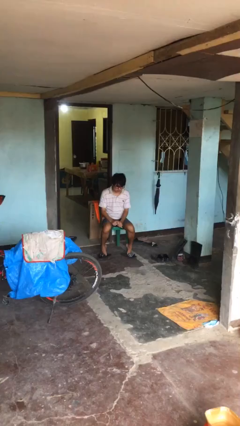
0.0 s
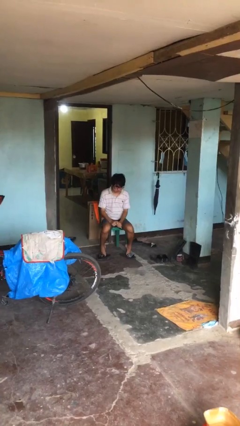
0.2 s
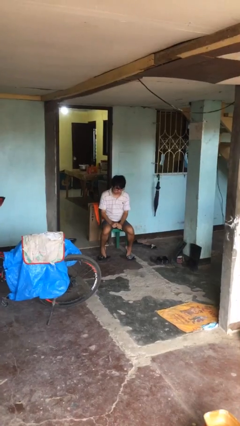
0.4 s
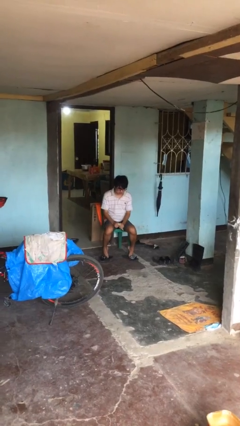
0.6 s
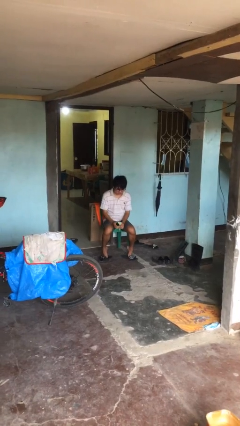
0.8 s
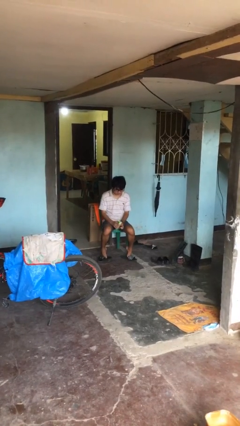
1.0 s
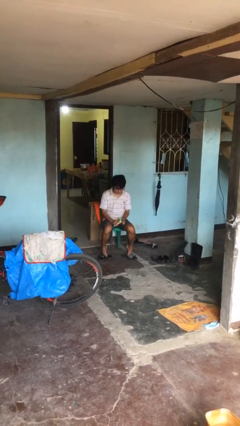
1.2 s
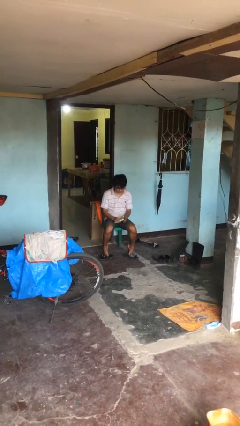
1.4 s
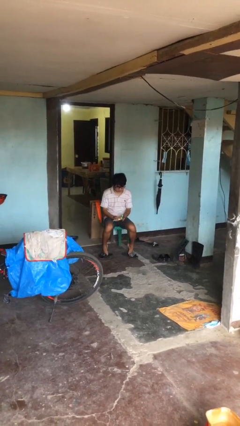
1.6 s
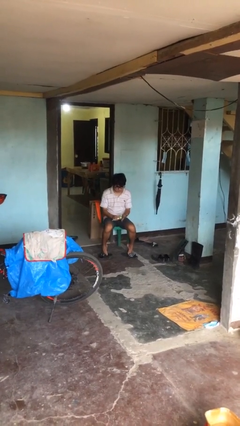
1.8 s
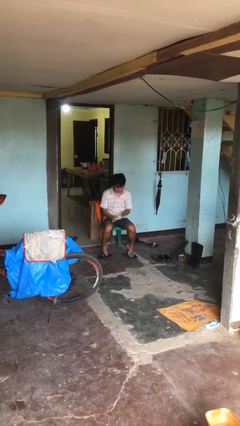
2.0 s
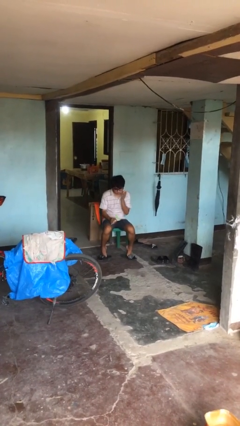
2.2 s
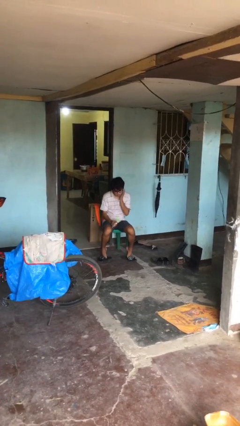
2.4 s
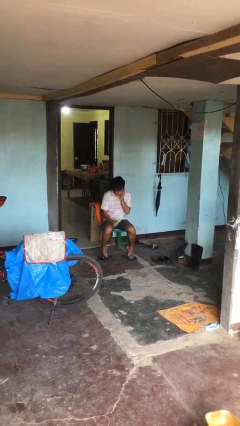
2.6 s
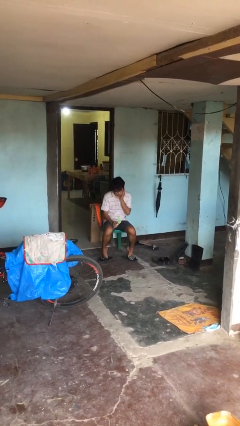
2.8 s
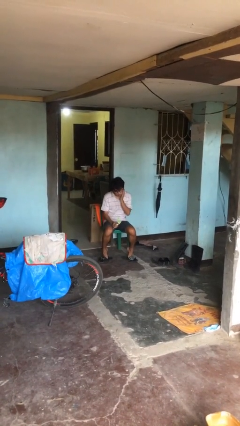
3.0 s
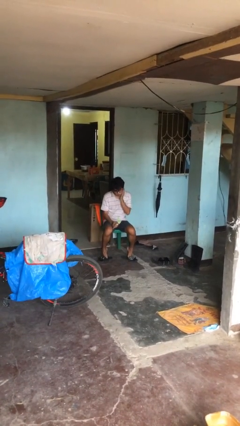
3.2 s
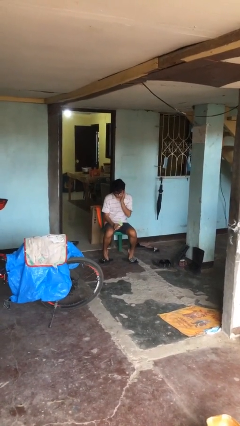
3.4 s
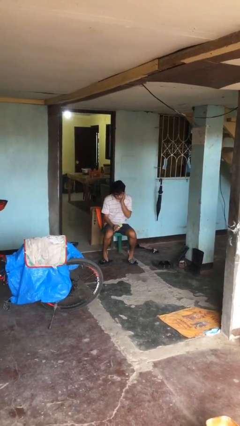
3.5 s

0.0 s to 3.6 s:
person applies facial moisturizer

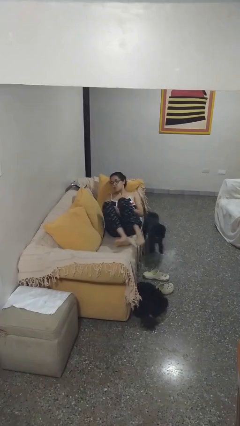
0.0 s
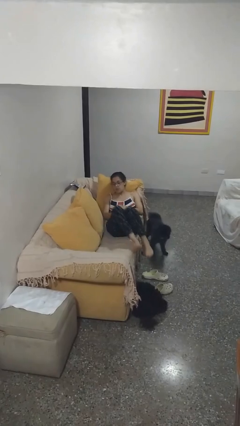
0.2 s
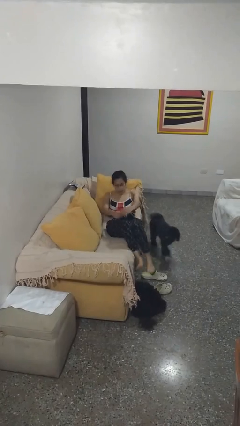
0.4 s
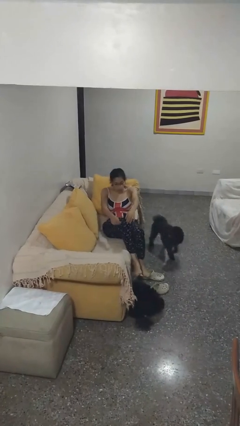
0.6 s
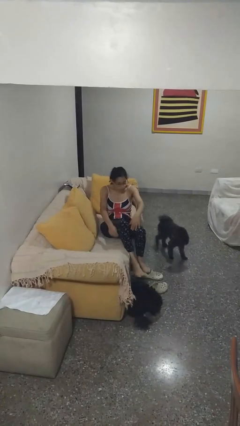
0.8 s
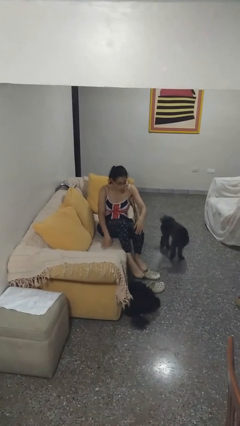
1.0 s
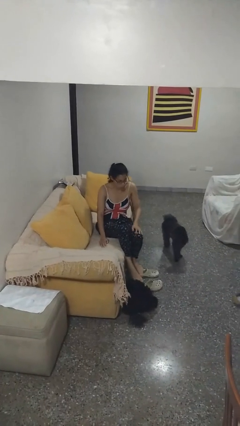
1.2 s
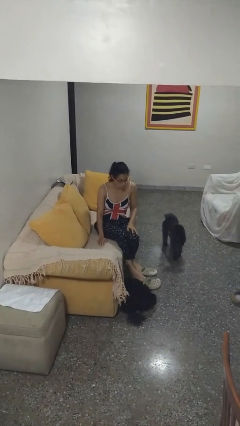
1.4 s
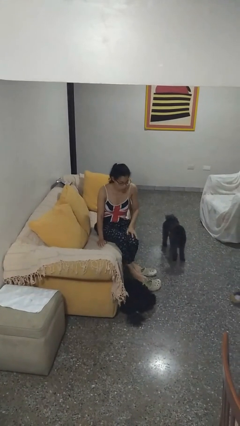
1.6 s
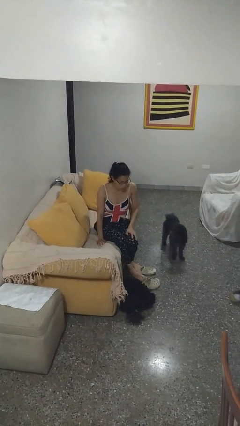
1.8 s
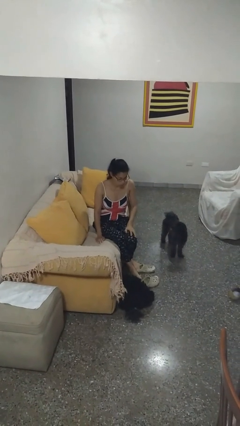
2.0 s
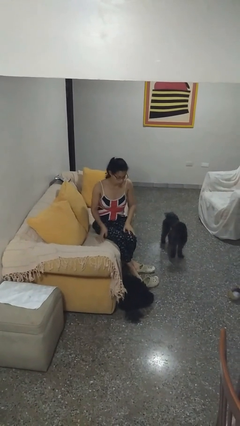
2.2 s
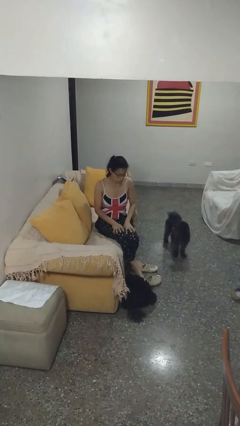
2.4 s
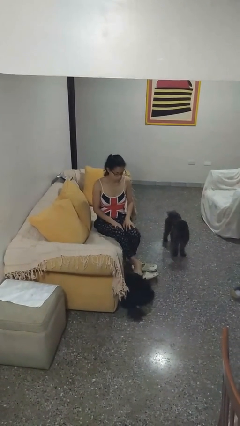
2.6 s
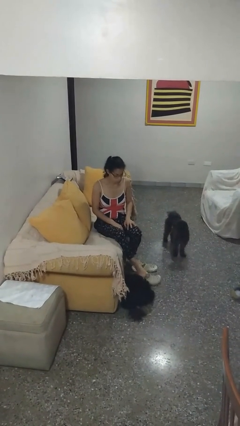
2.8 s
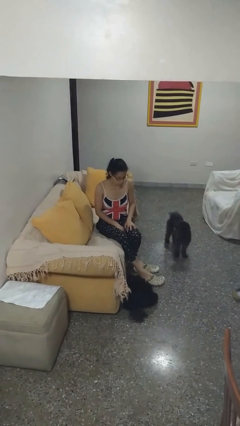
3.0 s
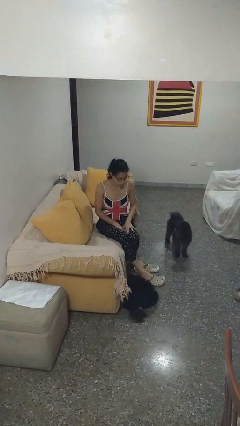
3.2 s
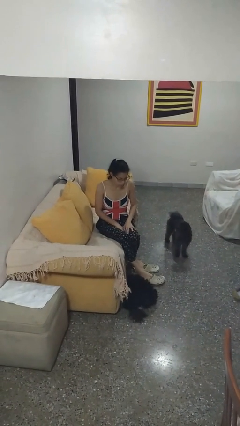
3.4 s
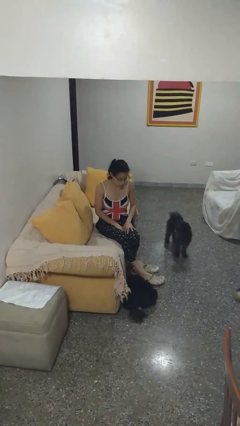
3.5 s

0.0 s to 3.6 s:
person stands up

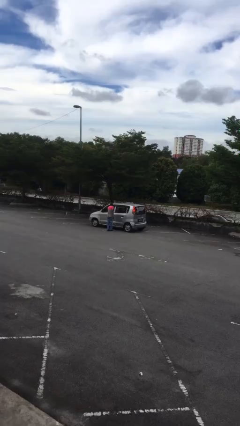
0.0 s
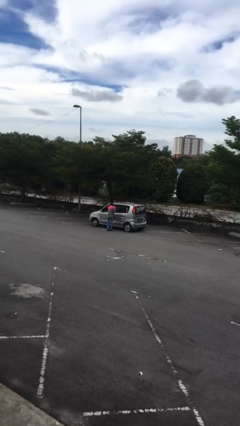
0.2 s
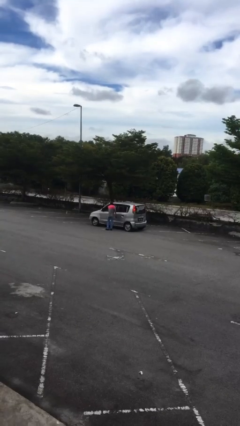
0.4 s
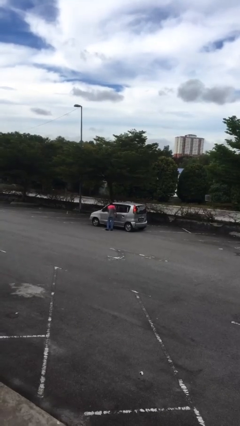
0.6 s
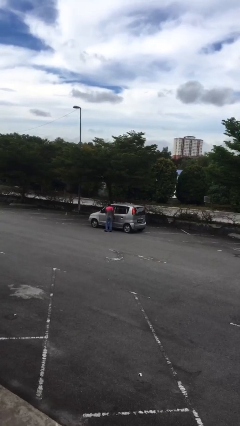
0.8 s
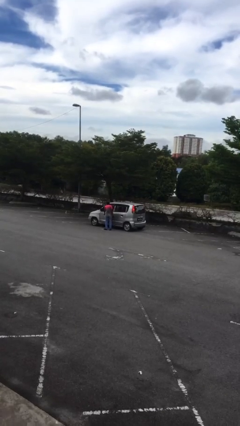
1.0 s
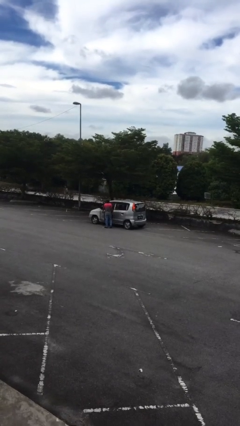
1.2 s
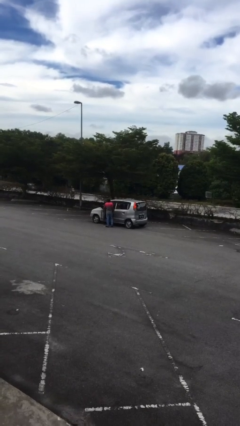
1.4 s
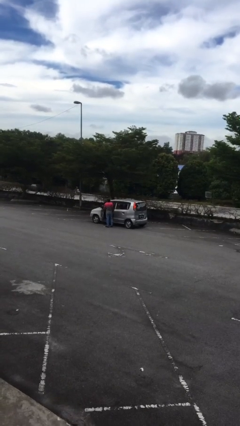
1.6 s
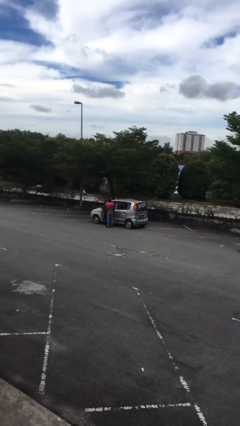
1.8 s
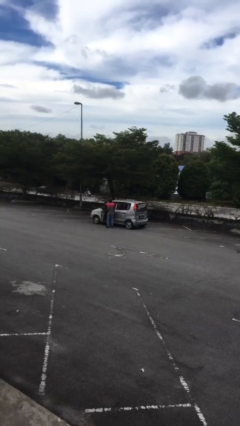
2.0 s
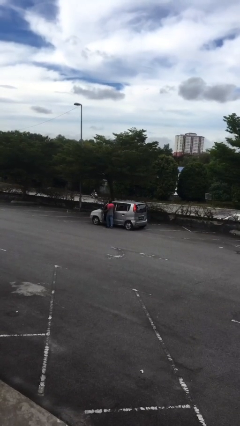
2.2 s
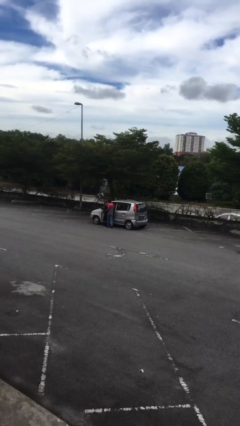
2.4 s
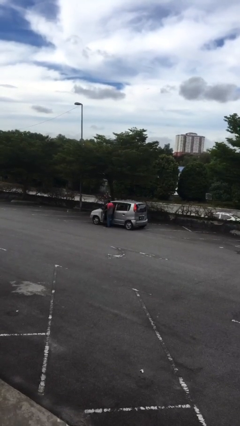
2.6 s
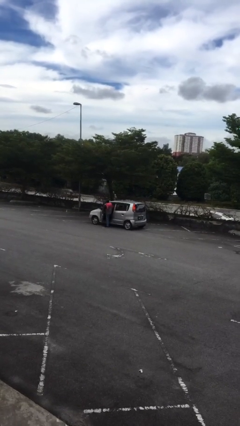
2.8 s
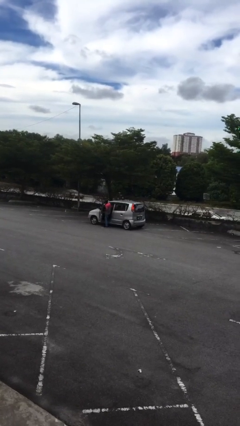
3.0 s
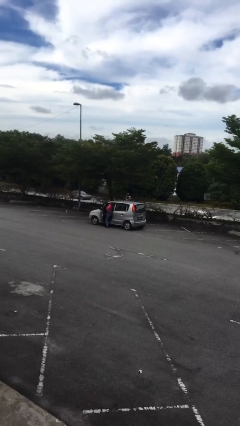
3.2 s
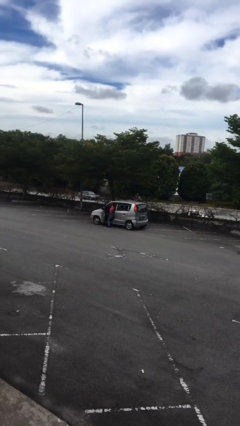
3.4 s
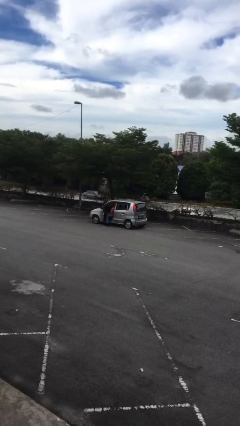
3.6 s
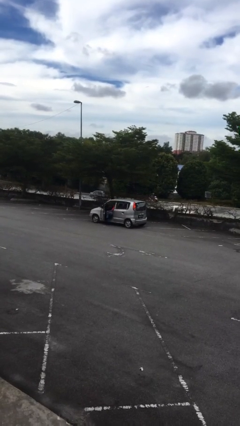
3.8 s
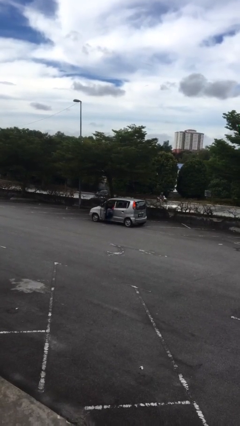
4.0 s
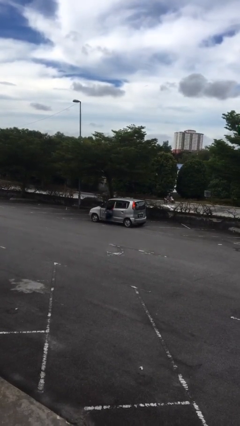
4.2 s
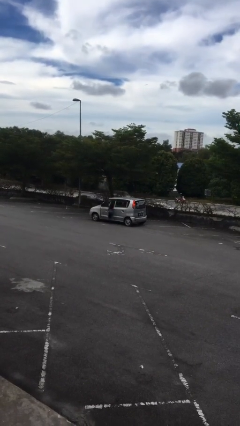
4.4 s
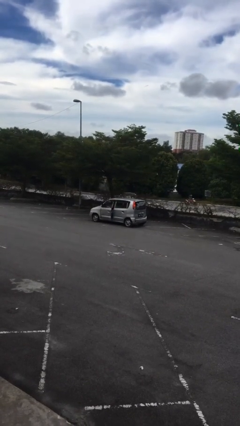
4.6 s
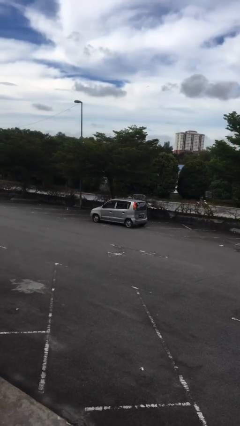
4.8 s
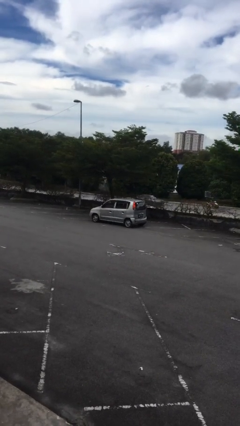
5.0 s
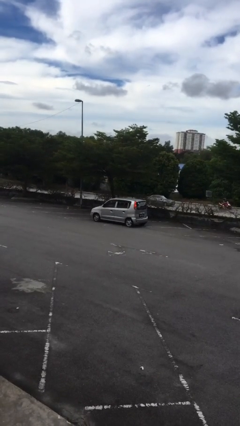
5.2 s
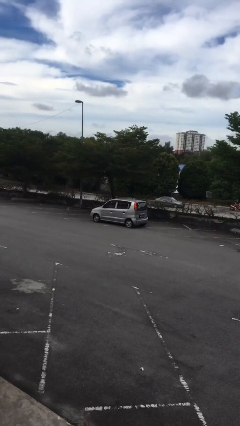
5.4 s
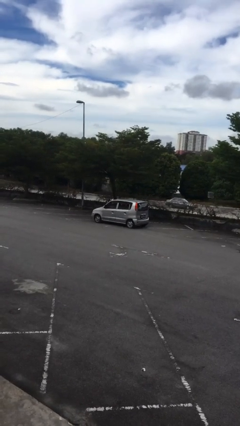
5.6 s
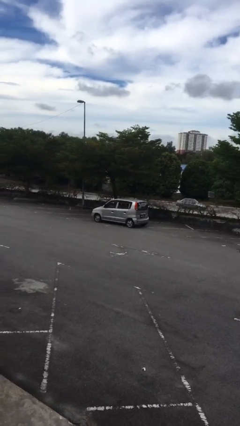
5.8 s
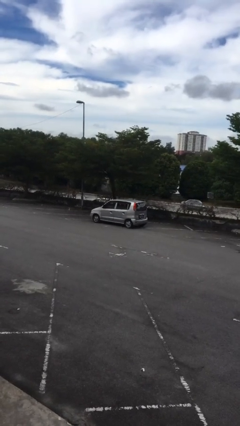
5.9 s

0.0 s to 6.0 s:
car picks up person

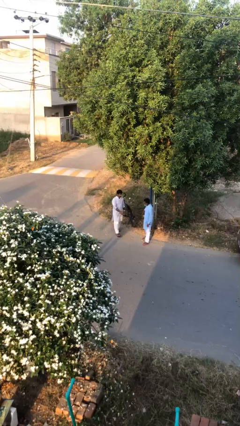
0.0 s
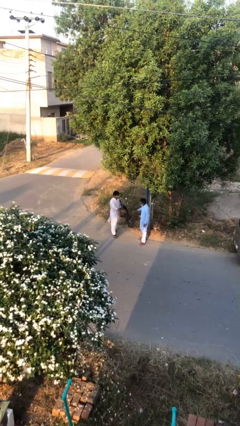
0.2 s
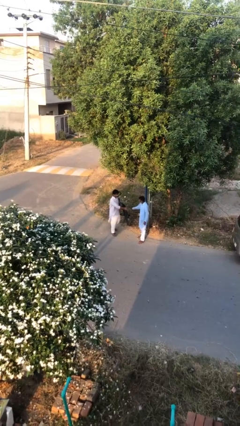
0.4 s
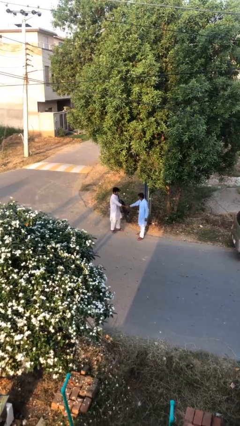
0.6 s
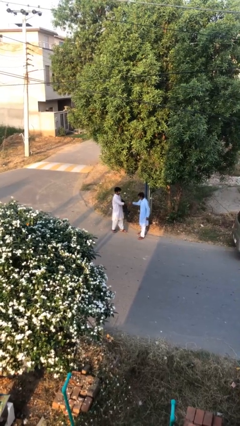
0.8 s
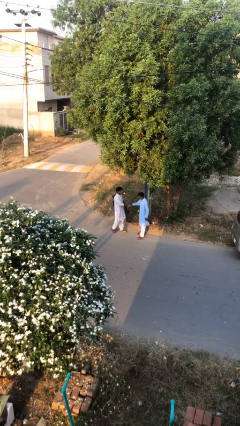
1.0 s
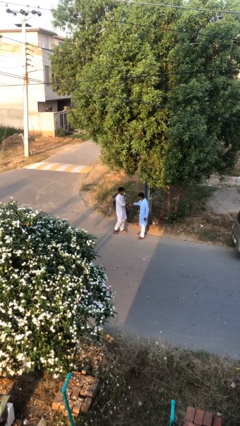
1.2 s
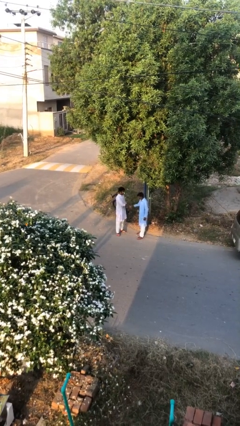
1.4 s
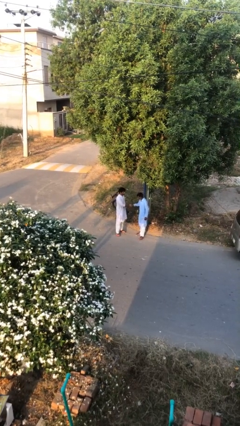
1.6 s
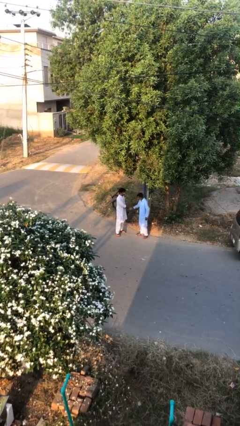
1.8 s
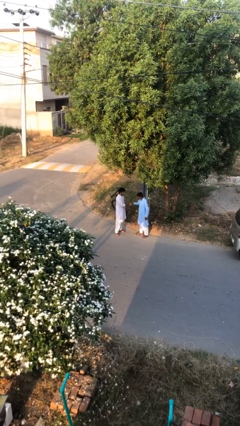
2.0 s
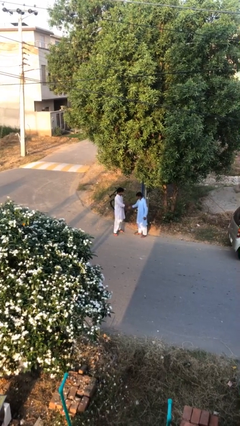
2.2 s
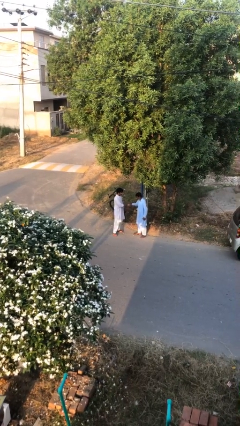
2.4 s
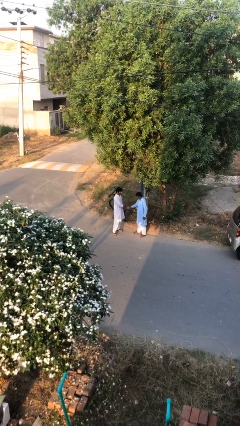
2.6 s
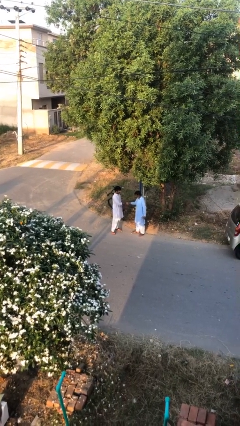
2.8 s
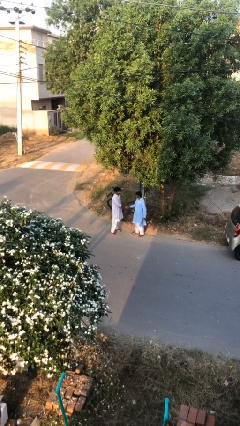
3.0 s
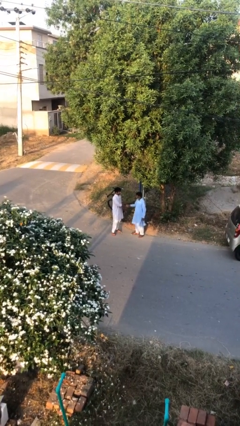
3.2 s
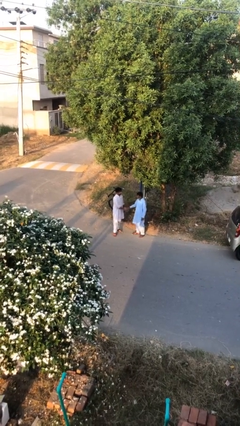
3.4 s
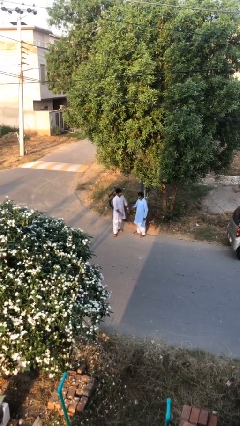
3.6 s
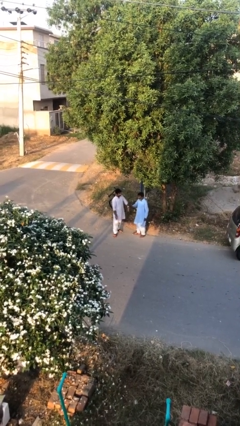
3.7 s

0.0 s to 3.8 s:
person shakes hand

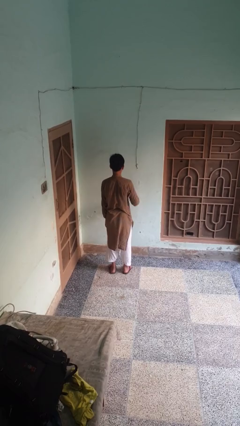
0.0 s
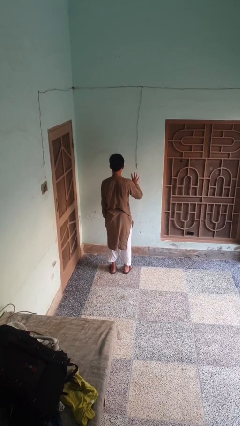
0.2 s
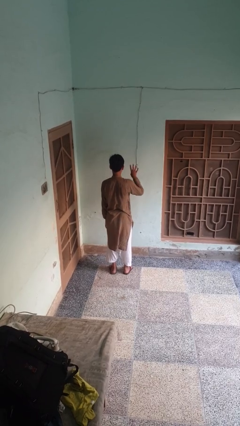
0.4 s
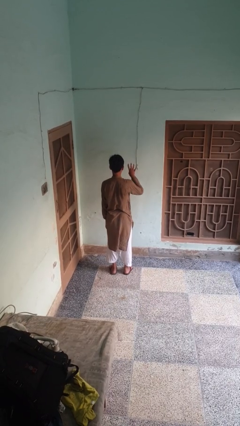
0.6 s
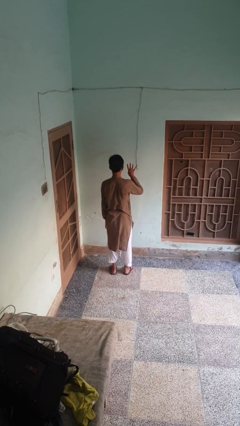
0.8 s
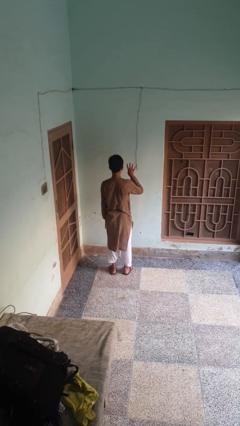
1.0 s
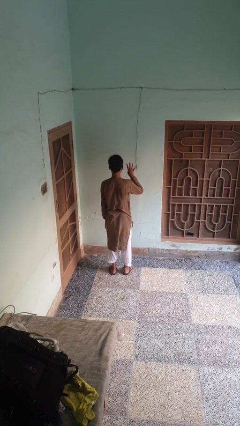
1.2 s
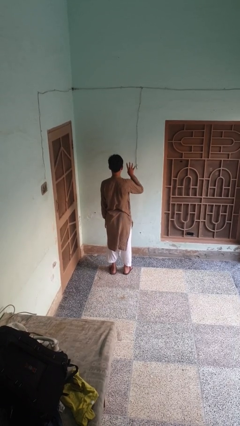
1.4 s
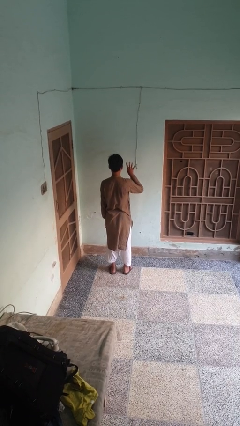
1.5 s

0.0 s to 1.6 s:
person gestures number four
